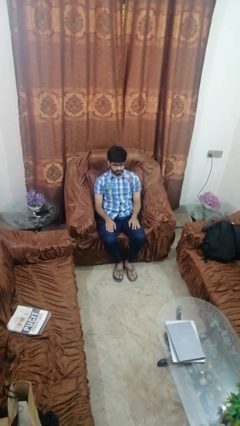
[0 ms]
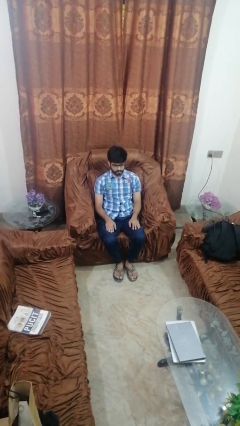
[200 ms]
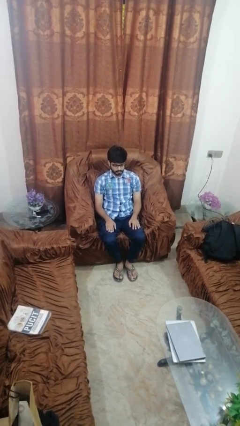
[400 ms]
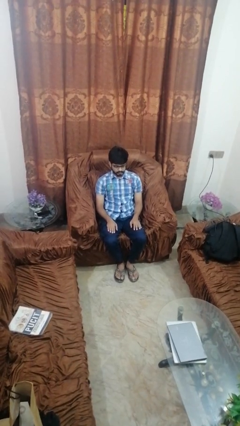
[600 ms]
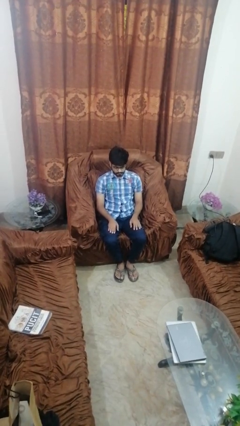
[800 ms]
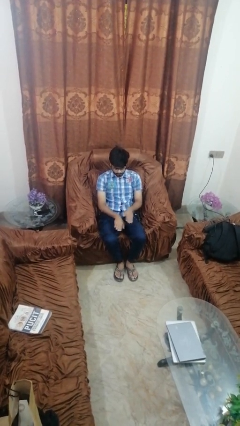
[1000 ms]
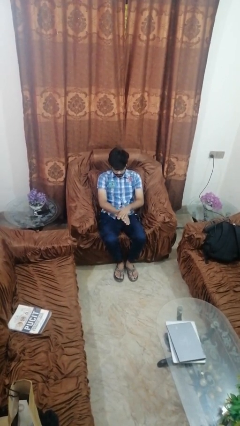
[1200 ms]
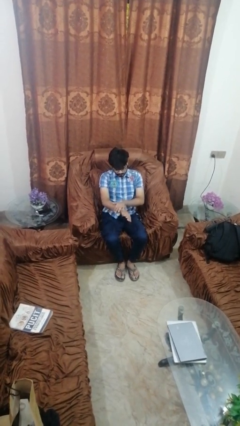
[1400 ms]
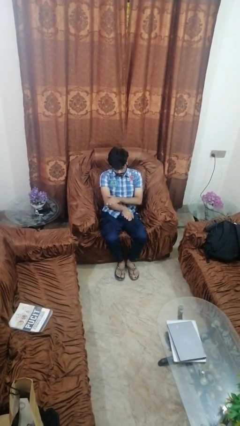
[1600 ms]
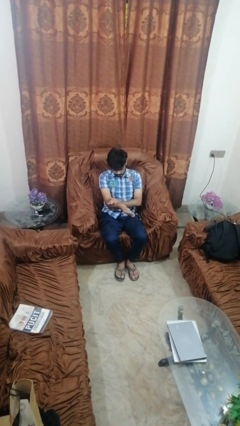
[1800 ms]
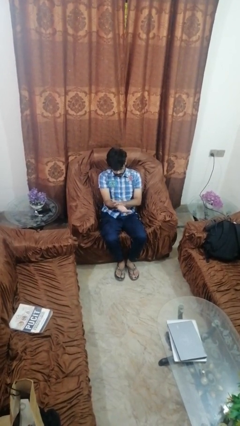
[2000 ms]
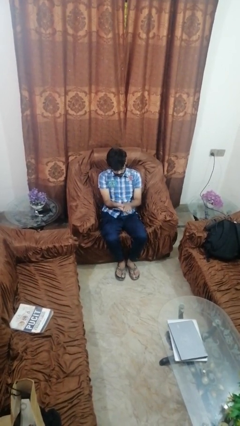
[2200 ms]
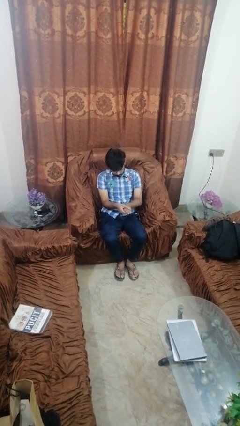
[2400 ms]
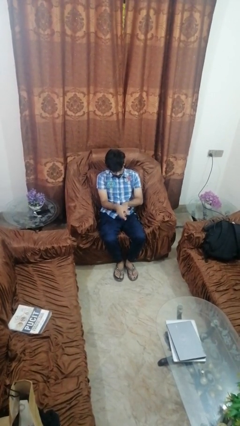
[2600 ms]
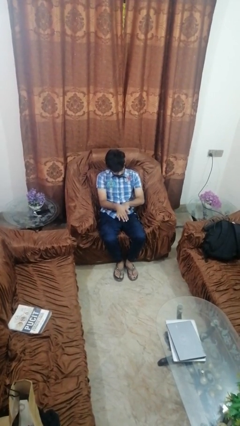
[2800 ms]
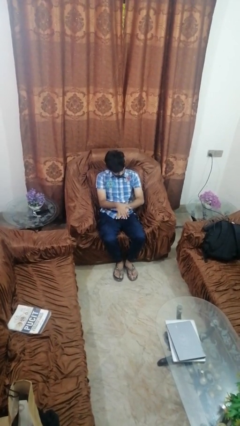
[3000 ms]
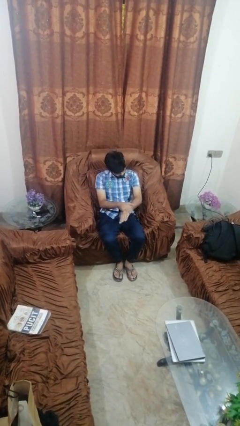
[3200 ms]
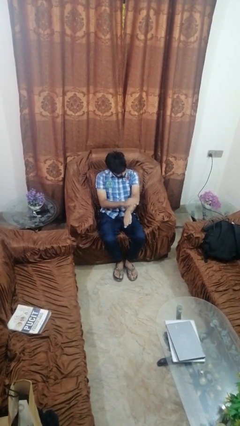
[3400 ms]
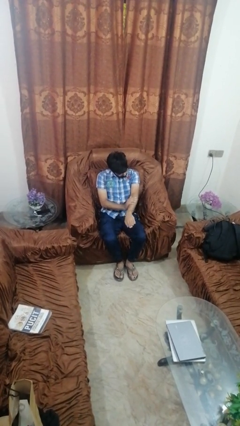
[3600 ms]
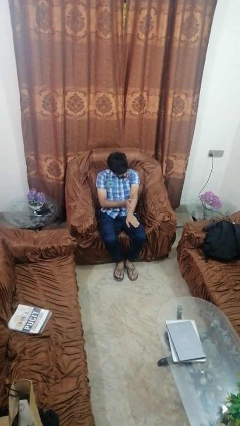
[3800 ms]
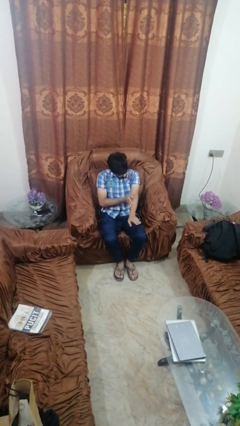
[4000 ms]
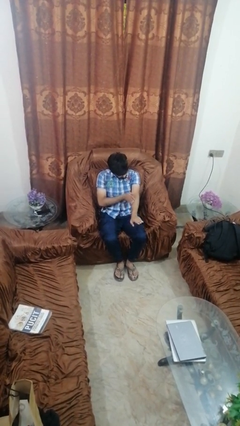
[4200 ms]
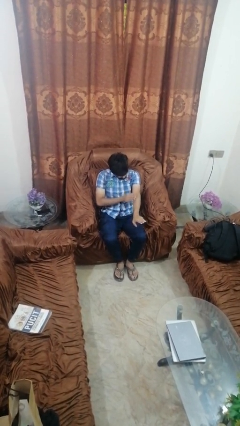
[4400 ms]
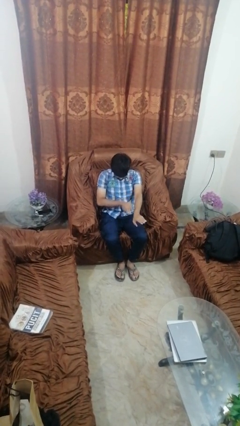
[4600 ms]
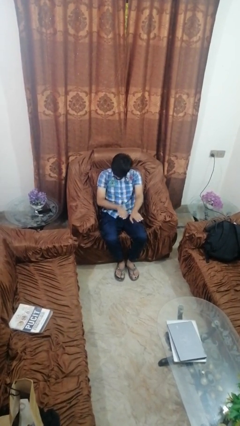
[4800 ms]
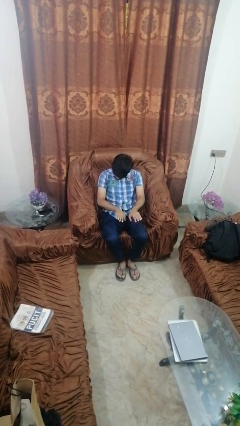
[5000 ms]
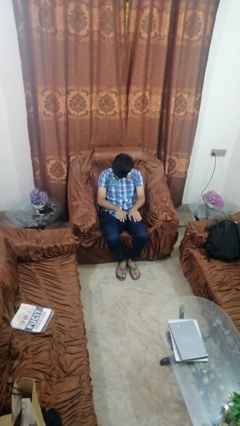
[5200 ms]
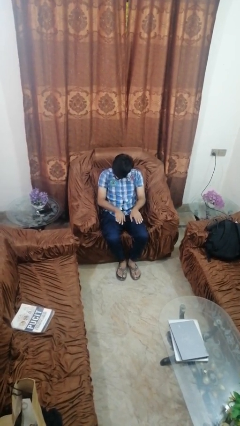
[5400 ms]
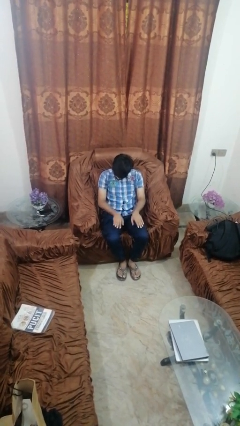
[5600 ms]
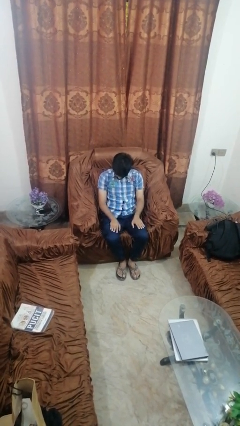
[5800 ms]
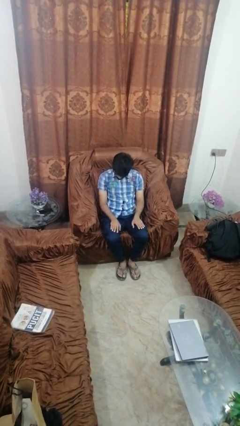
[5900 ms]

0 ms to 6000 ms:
person looks at hands in lap

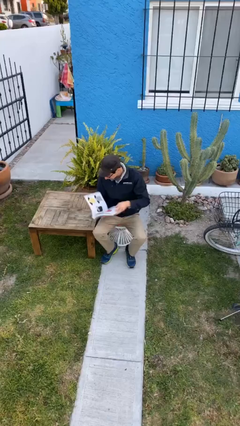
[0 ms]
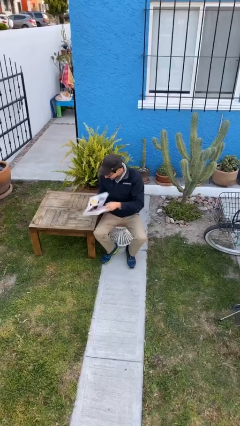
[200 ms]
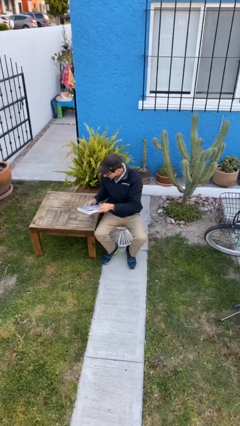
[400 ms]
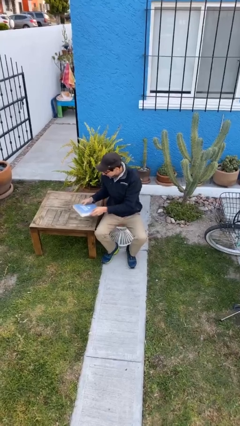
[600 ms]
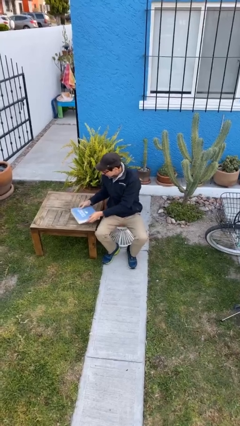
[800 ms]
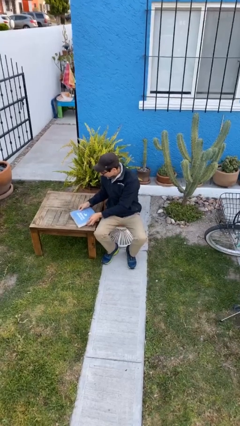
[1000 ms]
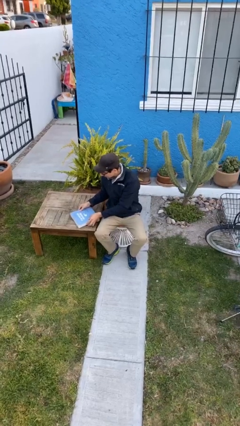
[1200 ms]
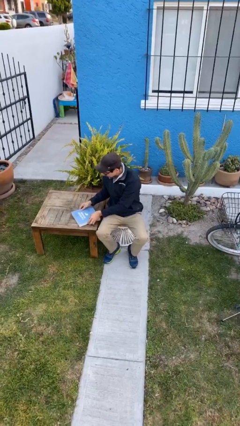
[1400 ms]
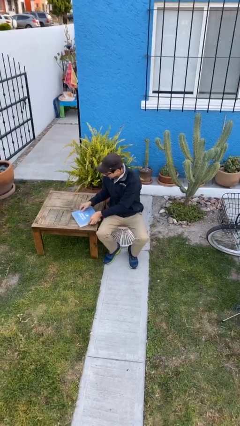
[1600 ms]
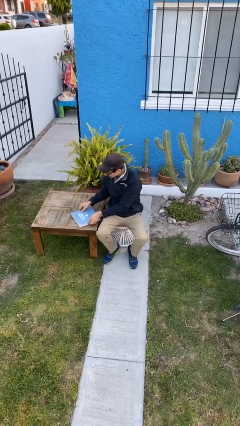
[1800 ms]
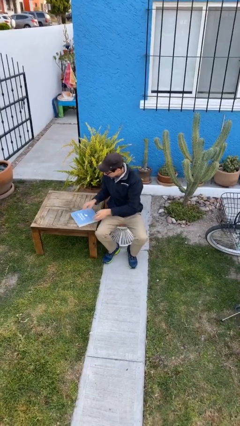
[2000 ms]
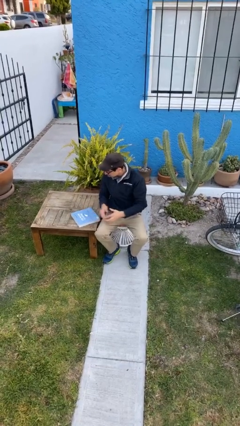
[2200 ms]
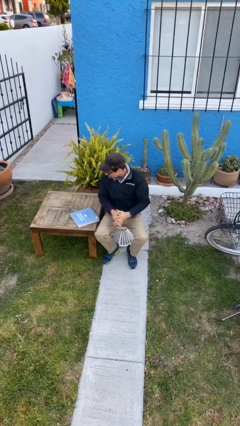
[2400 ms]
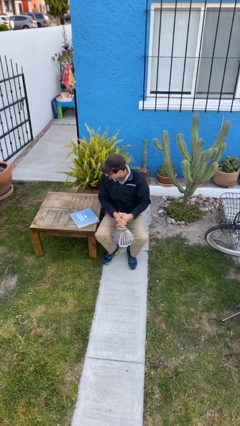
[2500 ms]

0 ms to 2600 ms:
person puts down object on table

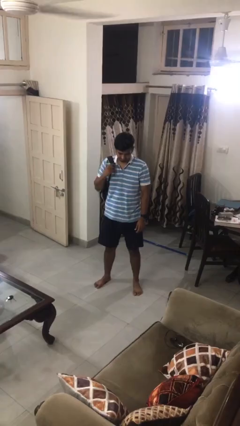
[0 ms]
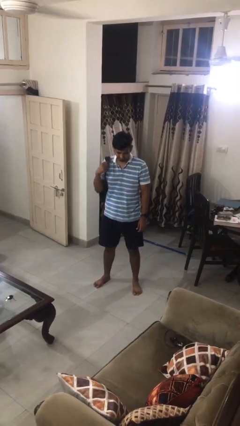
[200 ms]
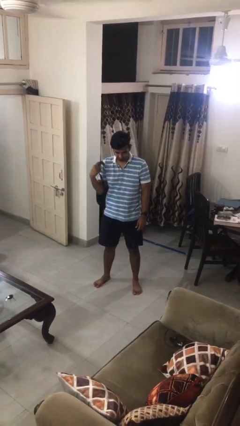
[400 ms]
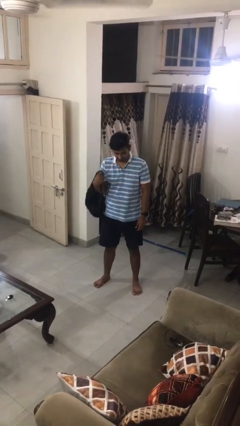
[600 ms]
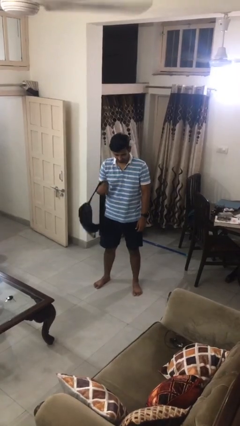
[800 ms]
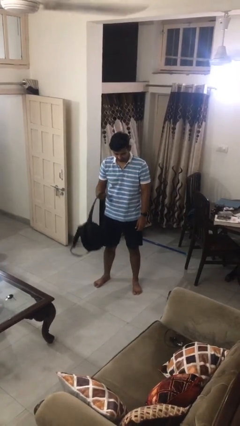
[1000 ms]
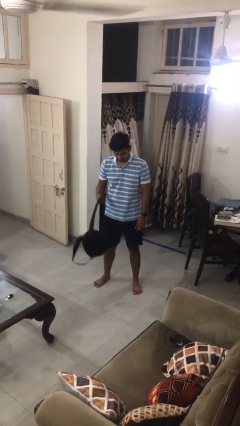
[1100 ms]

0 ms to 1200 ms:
person takes off backpack

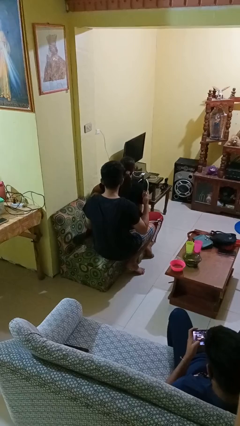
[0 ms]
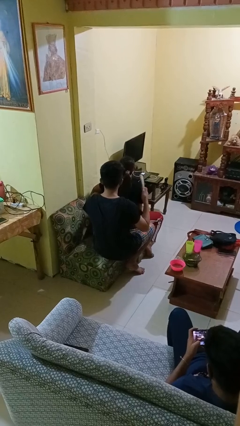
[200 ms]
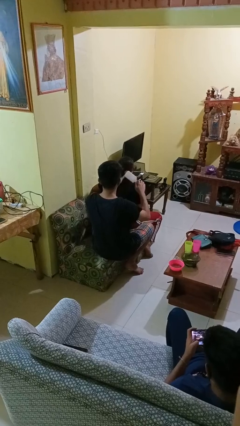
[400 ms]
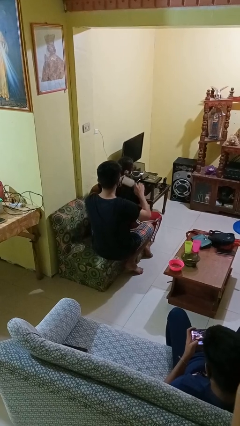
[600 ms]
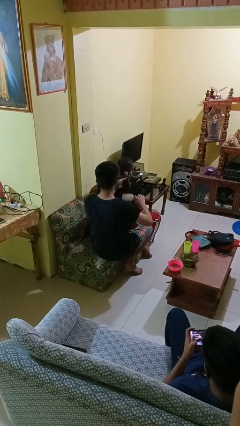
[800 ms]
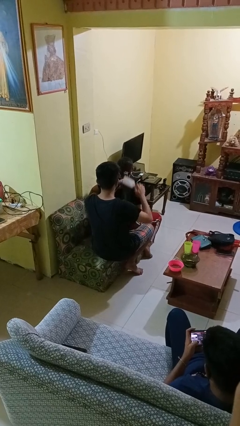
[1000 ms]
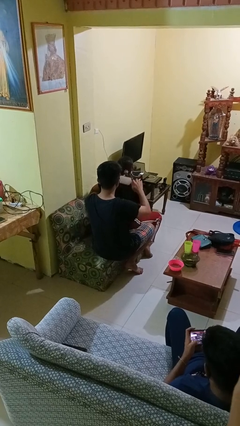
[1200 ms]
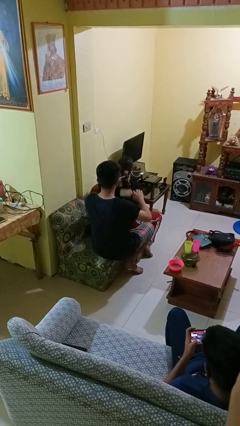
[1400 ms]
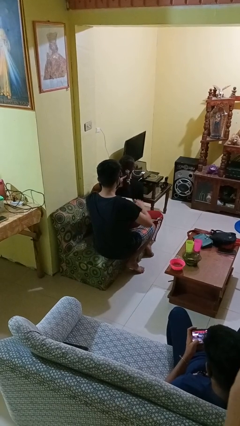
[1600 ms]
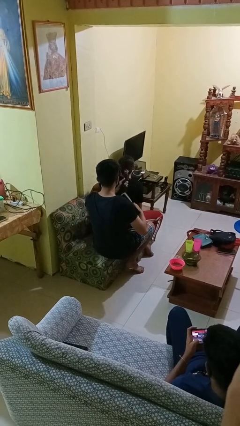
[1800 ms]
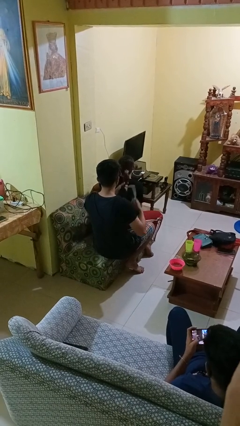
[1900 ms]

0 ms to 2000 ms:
person brushes hair of person

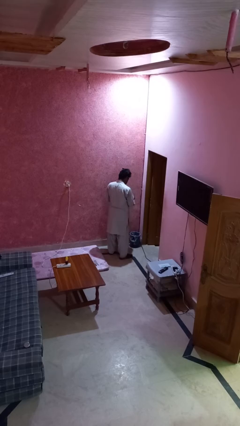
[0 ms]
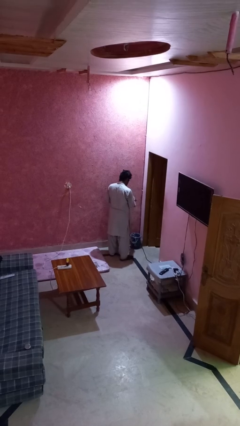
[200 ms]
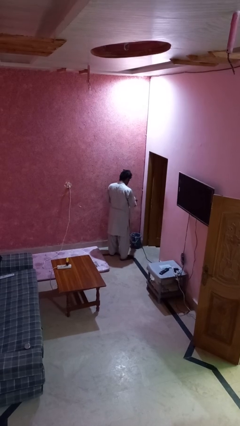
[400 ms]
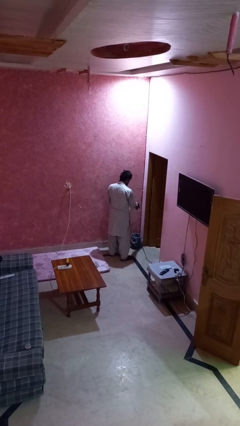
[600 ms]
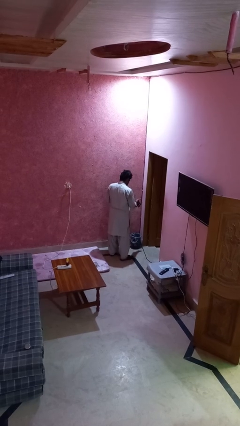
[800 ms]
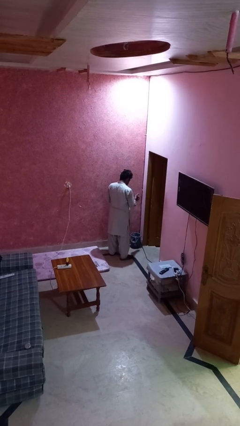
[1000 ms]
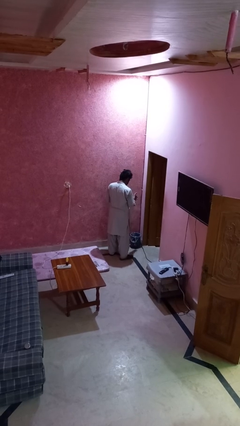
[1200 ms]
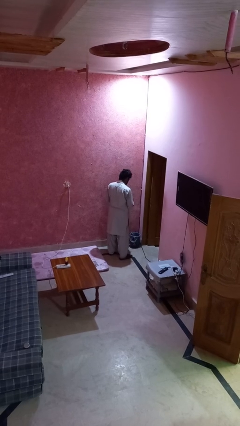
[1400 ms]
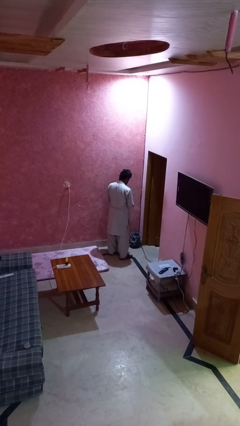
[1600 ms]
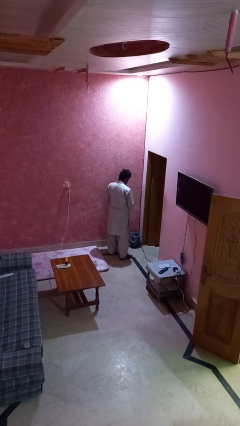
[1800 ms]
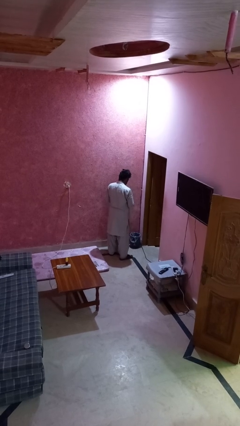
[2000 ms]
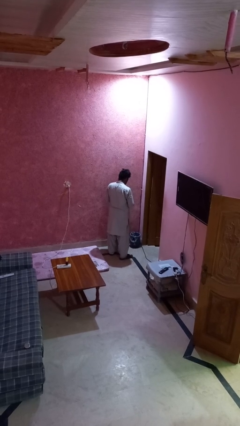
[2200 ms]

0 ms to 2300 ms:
person discards trash

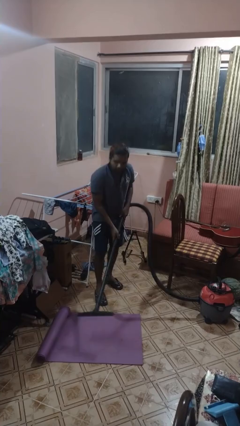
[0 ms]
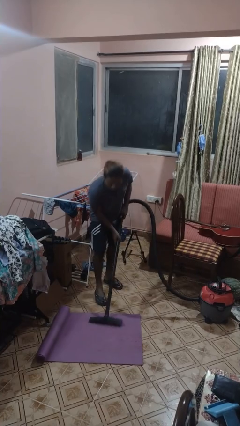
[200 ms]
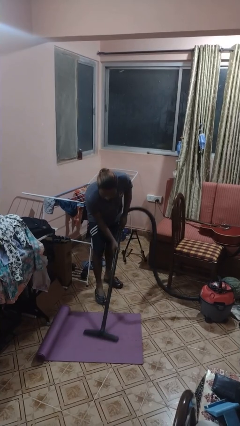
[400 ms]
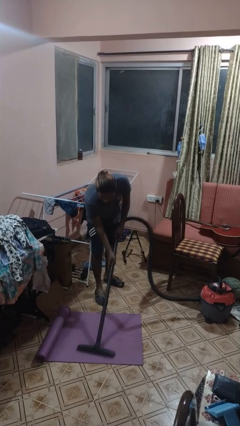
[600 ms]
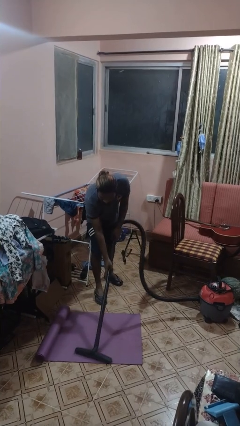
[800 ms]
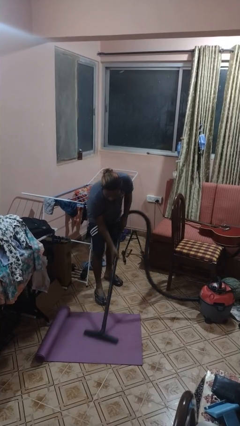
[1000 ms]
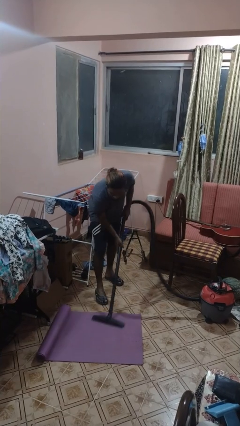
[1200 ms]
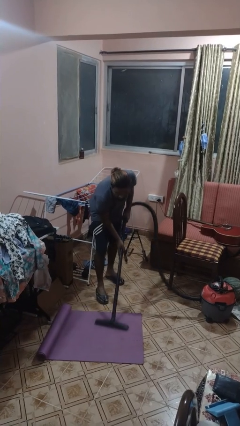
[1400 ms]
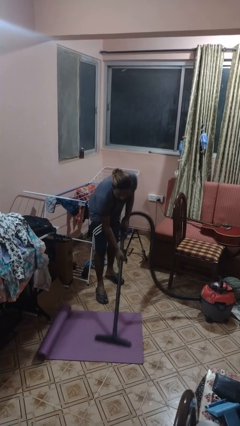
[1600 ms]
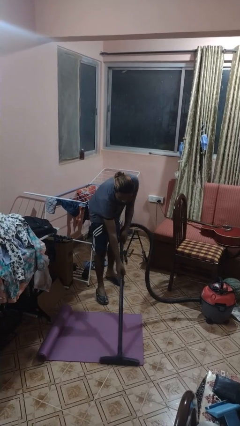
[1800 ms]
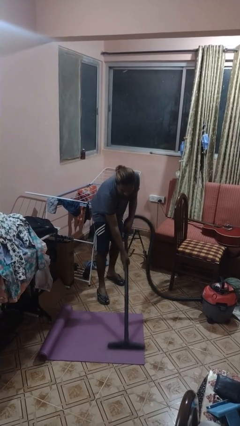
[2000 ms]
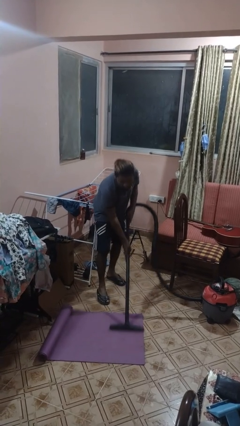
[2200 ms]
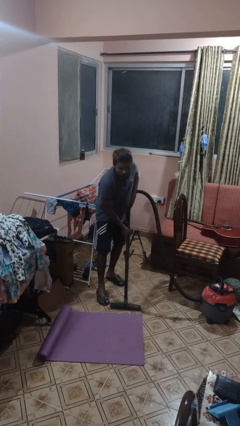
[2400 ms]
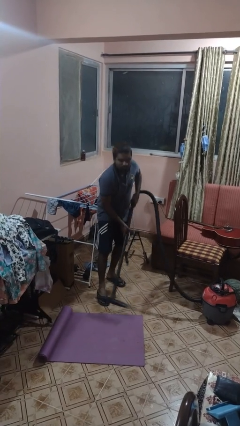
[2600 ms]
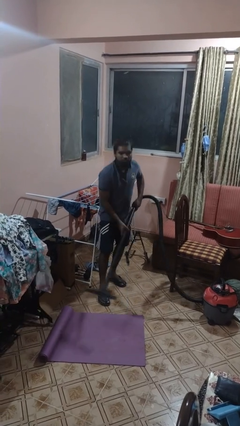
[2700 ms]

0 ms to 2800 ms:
person vacuums carpet

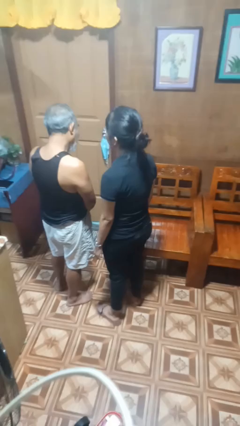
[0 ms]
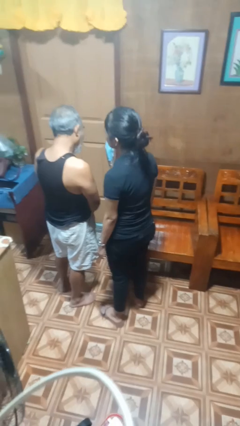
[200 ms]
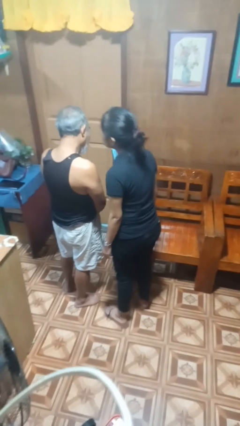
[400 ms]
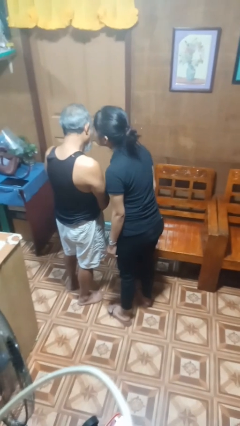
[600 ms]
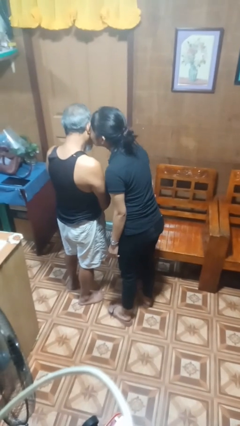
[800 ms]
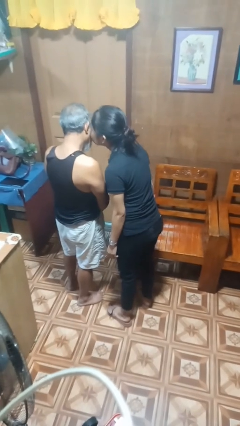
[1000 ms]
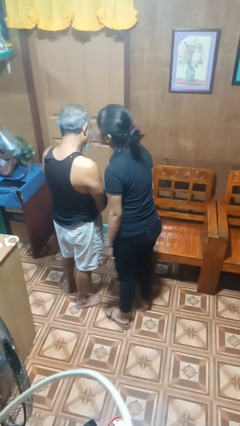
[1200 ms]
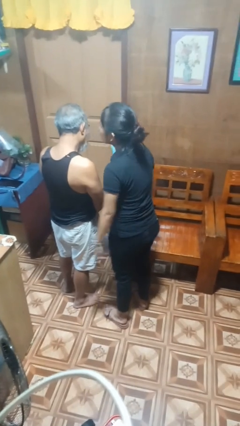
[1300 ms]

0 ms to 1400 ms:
person kisses cheek of person
